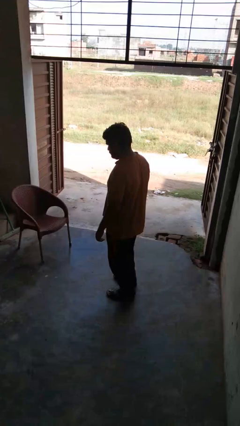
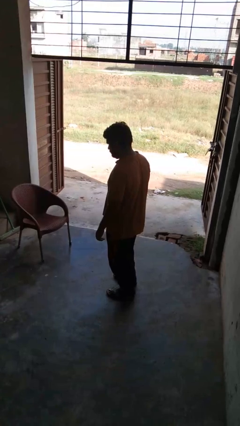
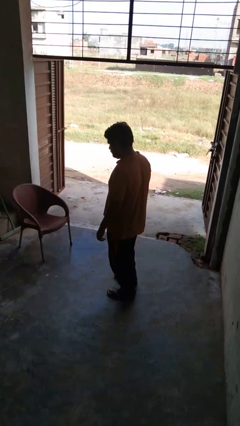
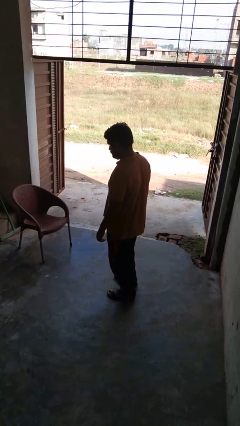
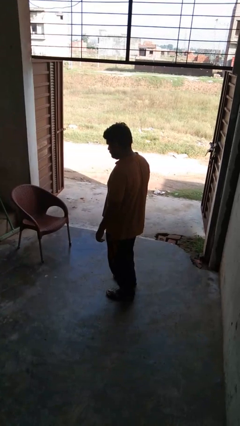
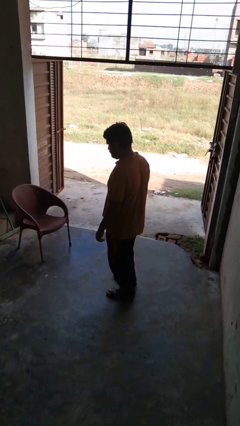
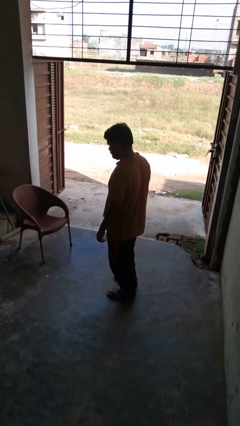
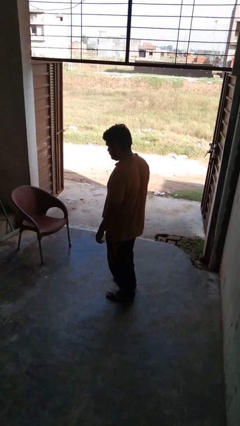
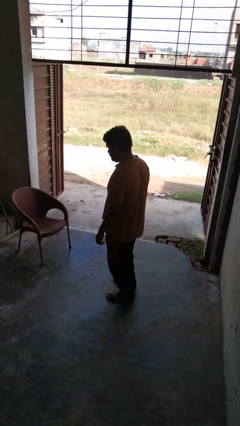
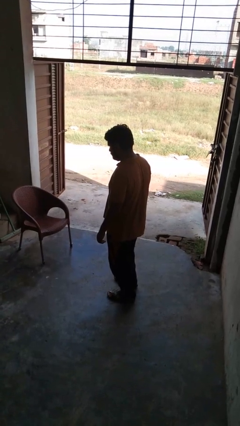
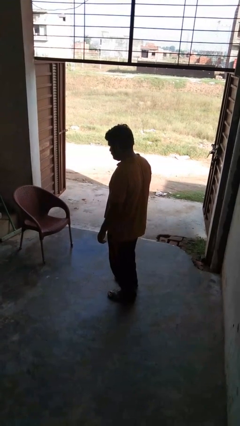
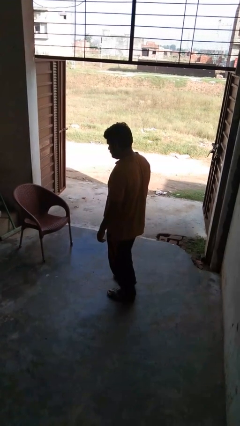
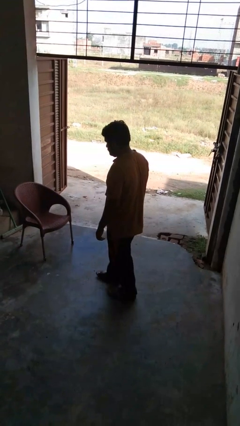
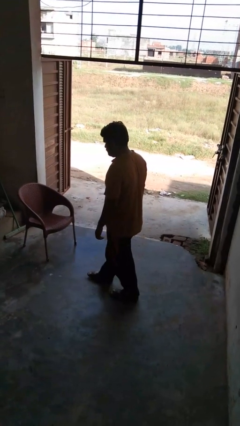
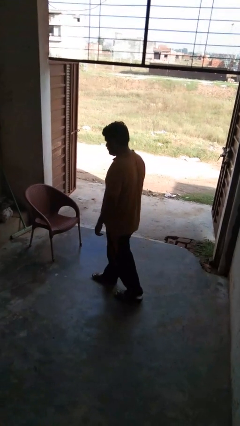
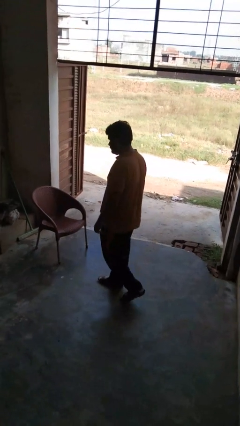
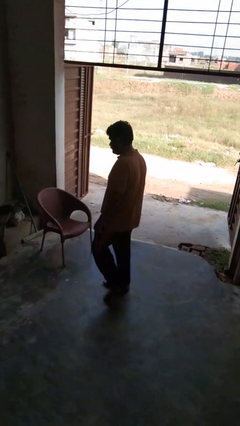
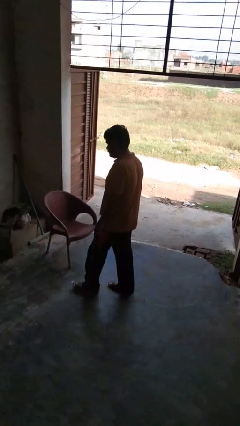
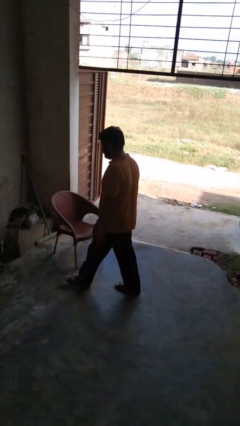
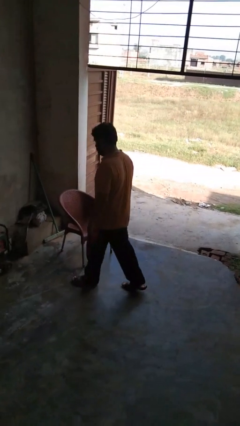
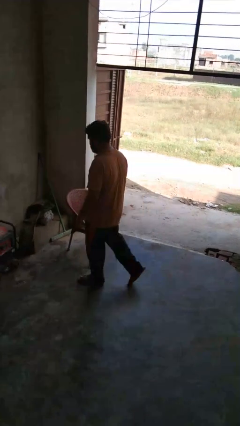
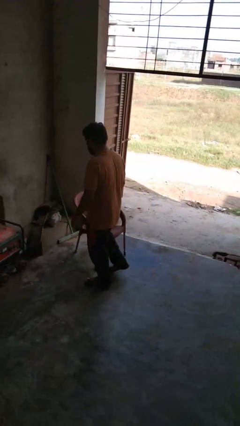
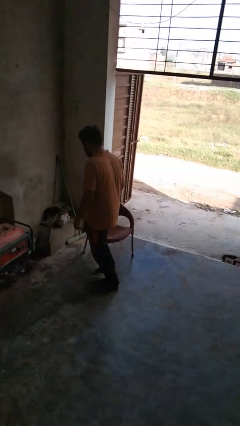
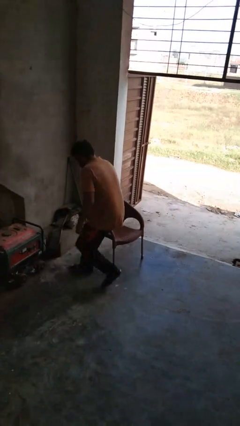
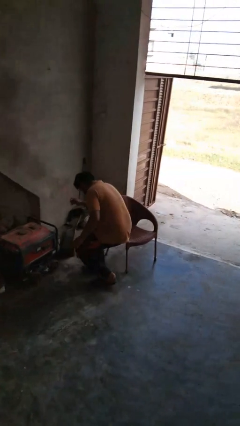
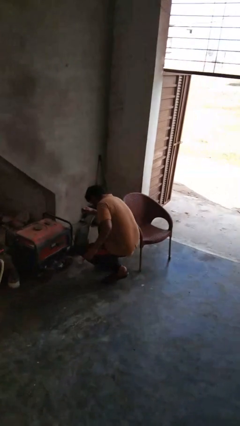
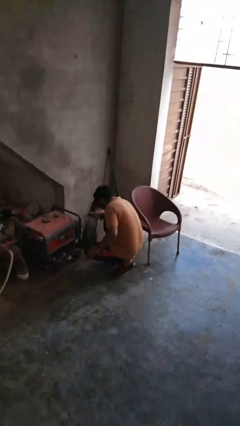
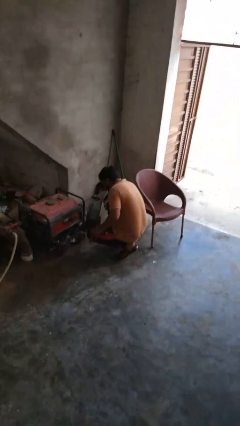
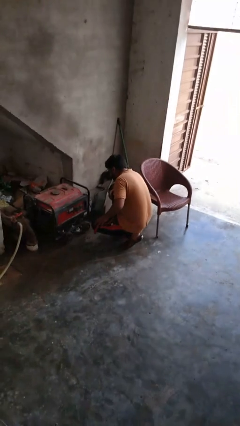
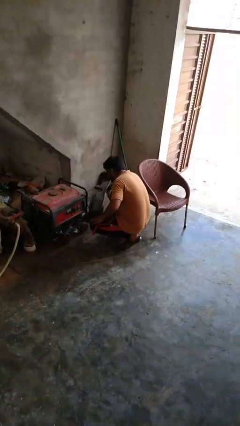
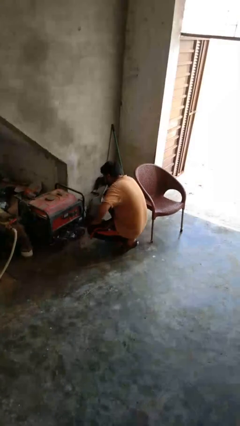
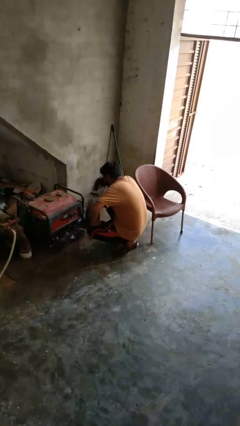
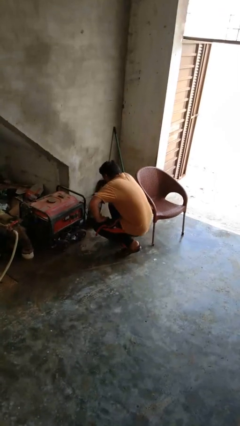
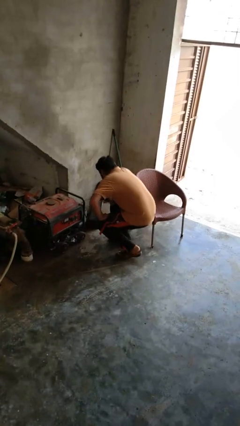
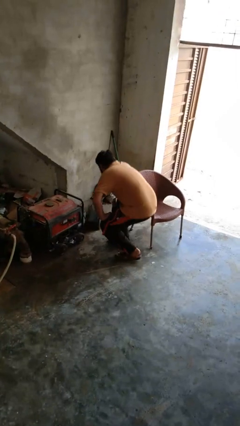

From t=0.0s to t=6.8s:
person trips on object on floor

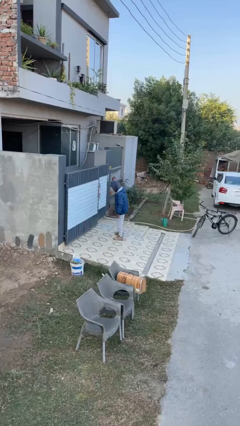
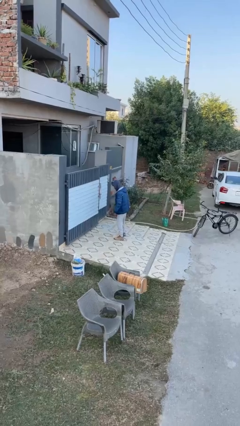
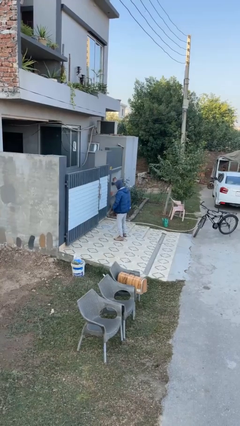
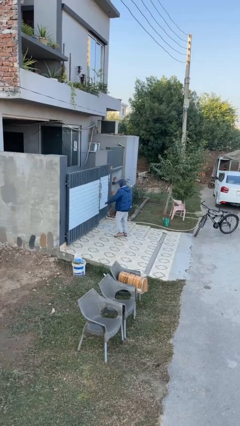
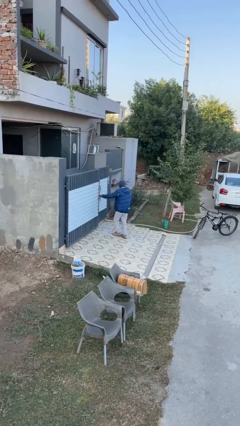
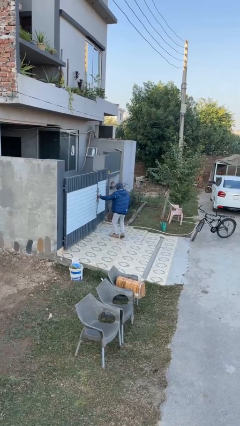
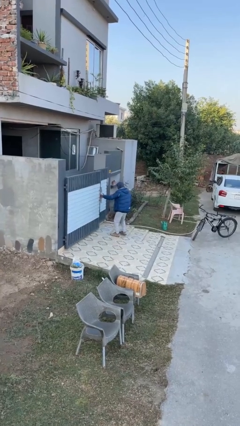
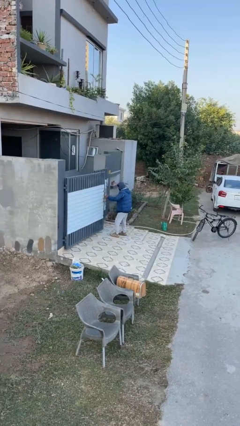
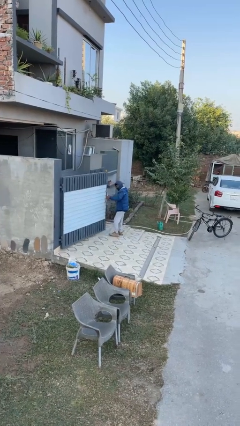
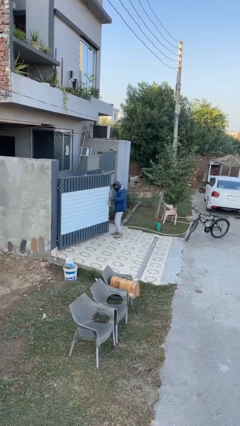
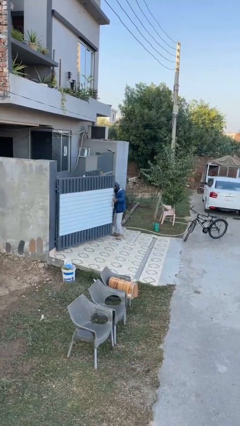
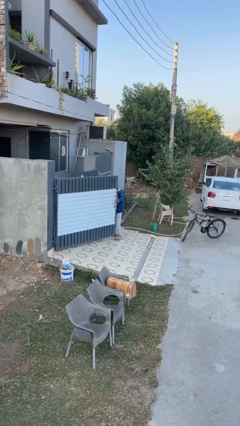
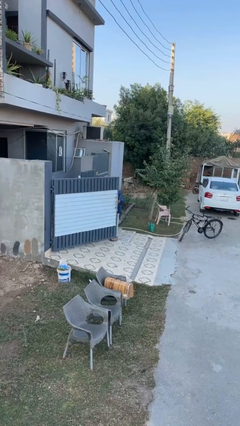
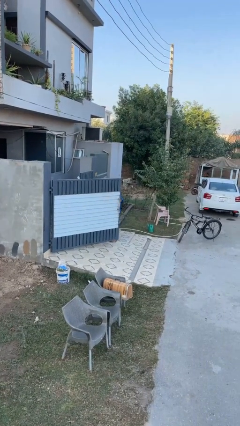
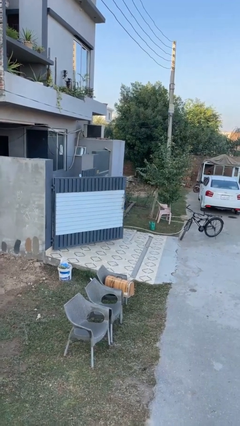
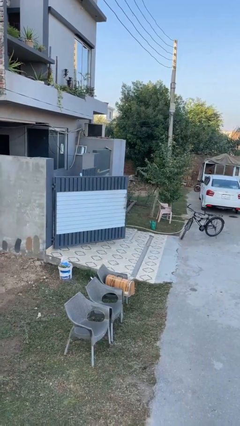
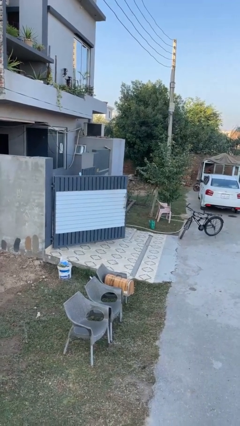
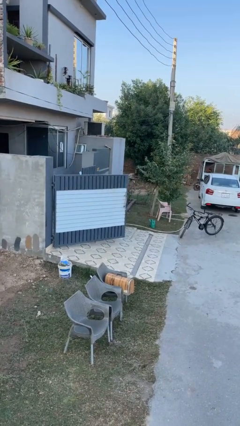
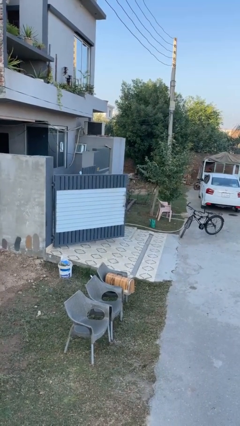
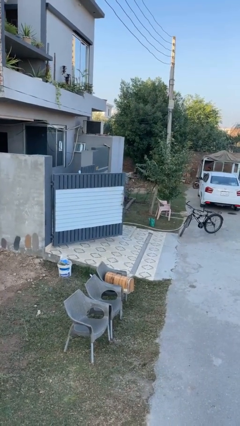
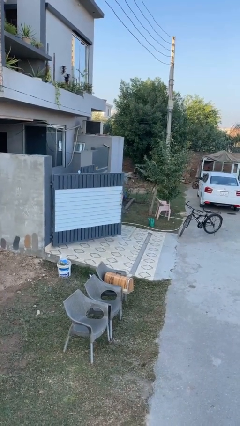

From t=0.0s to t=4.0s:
person opens facility door

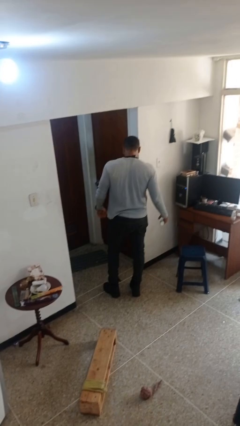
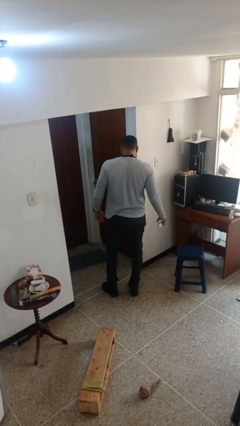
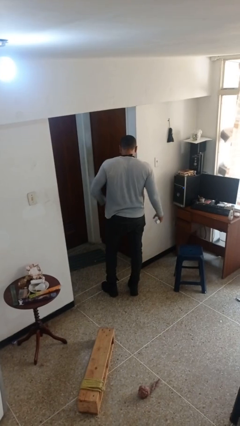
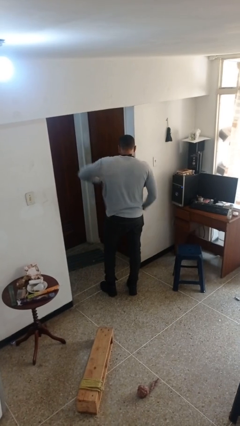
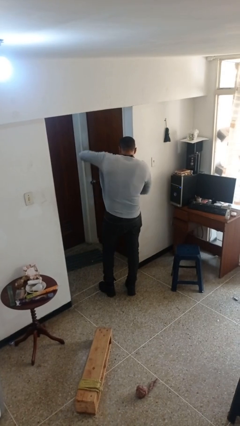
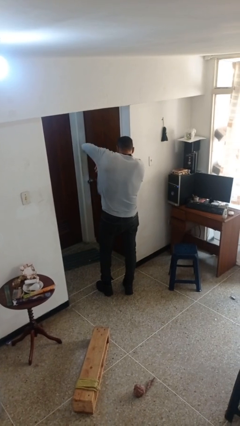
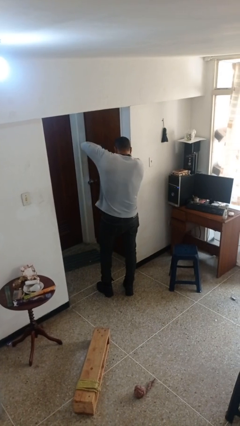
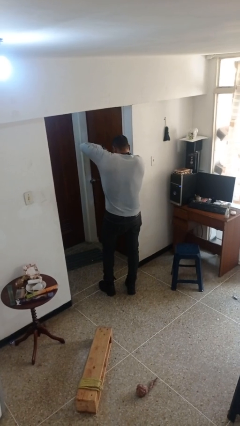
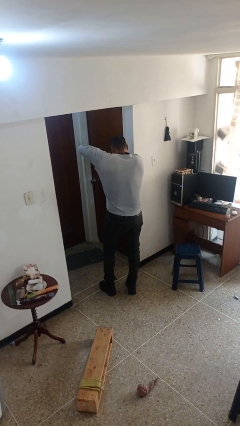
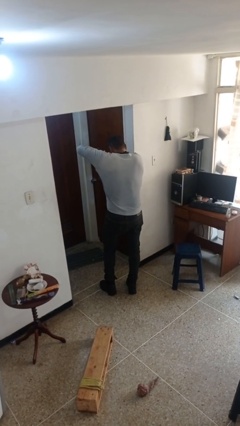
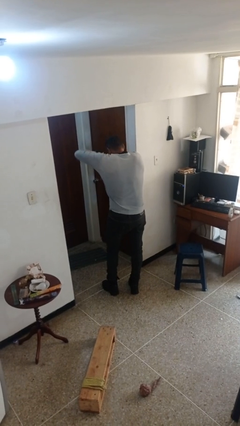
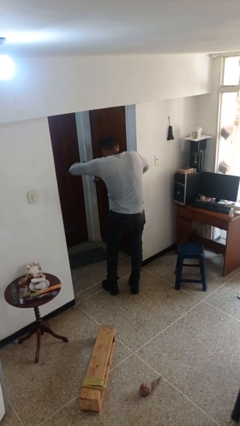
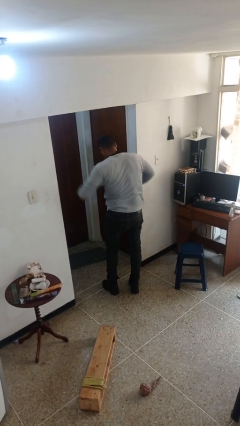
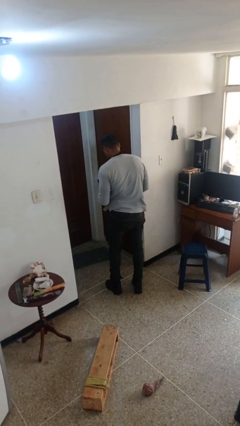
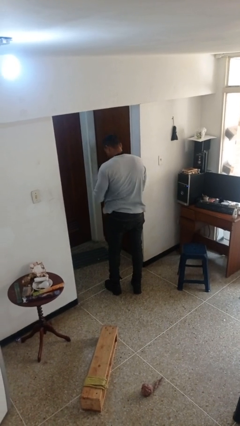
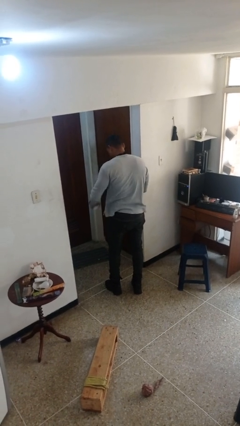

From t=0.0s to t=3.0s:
person applies deodorant

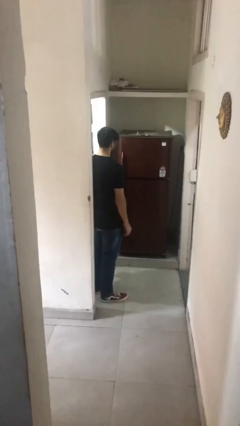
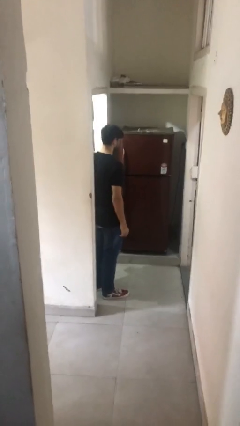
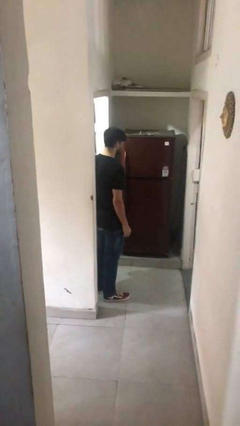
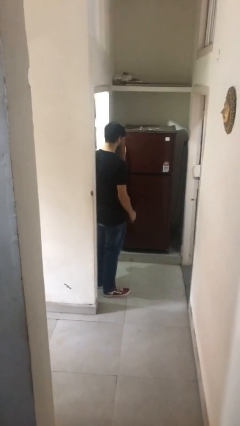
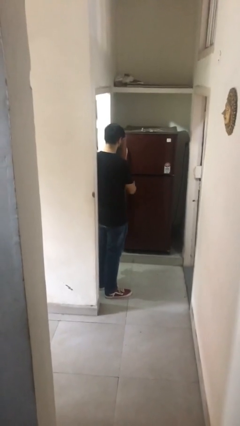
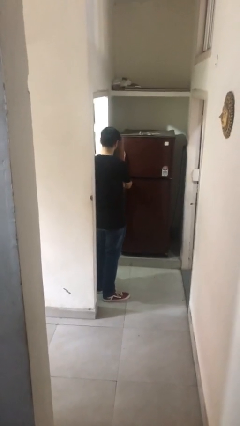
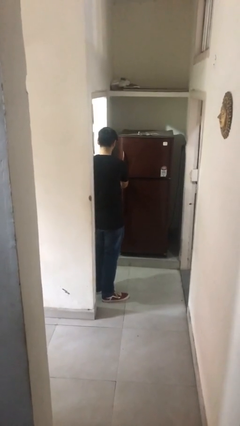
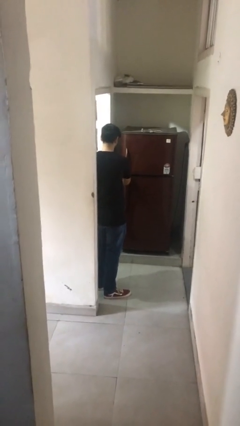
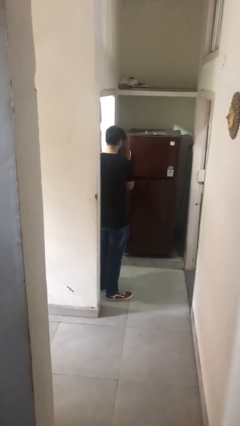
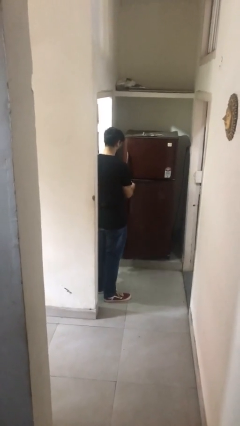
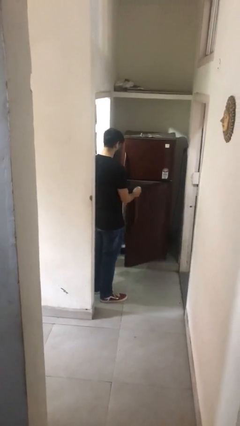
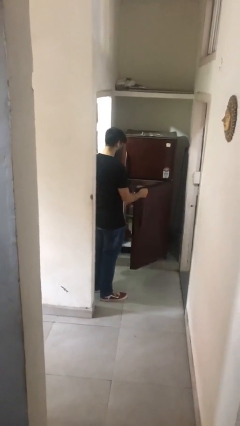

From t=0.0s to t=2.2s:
person opens refrigerator

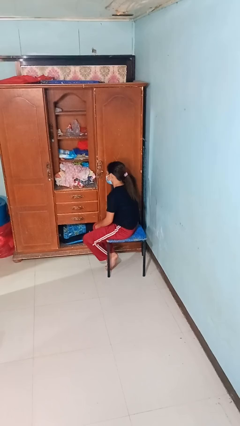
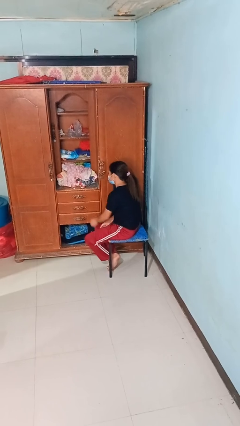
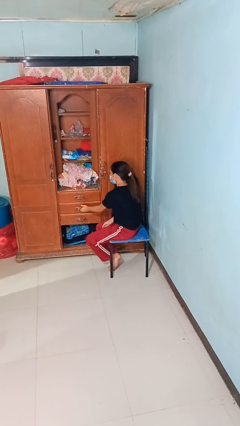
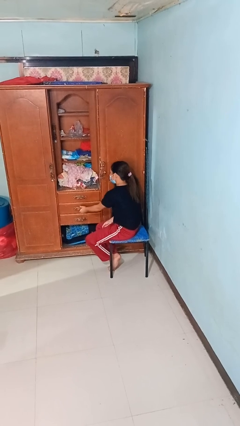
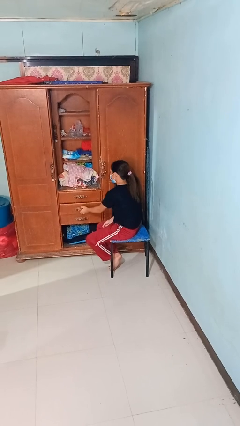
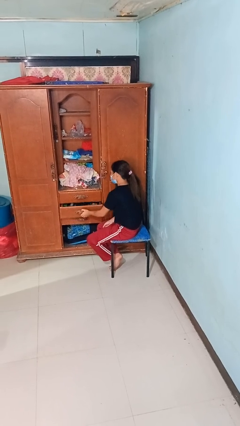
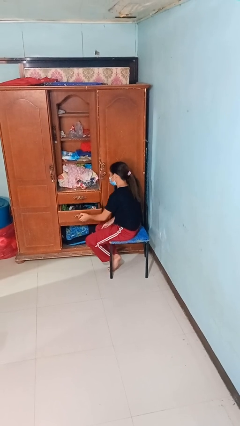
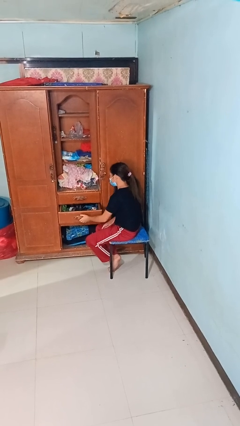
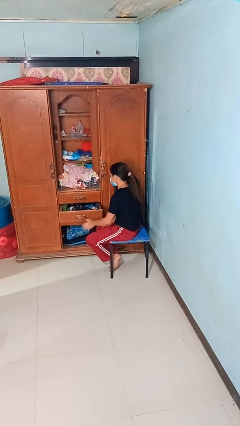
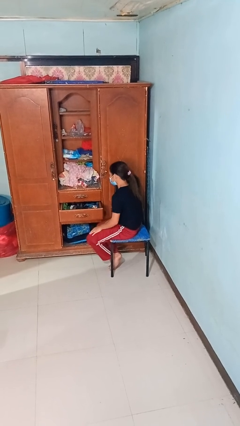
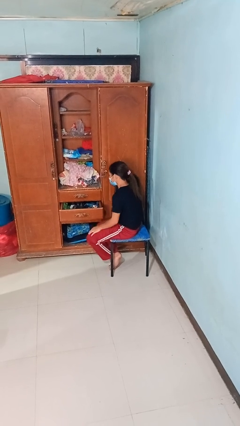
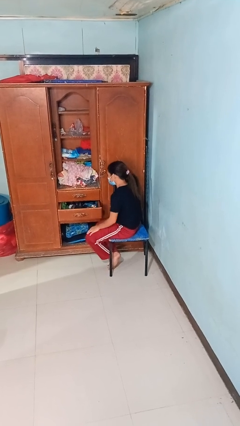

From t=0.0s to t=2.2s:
person opens dresser drawer
